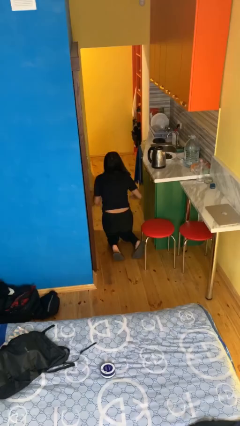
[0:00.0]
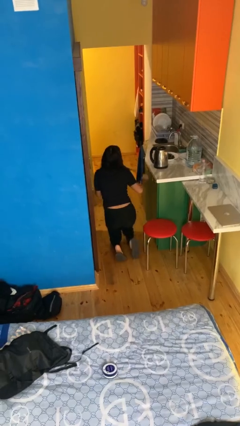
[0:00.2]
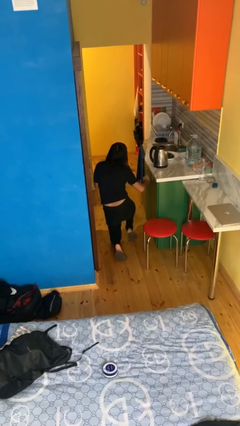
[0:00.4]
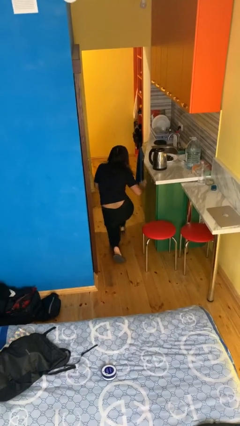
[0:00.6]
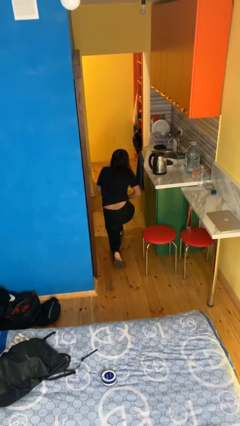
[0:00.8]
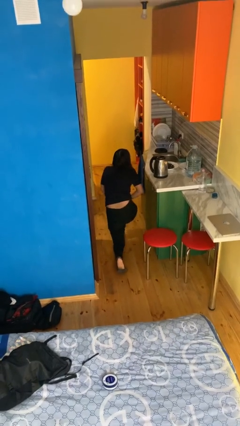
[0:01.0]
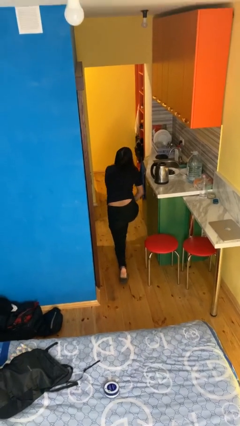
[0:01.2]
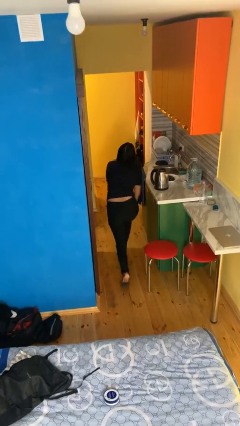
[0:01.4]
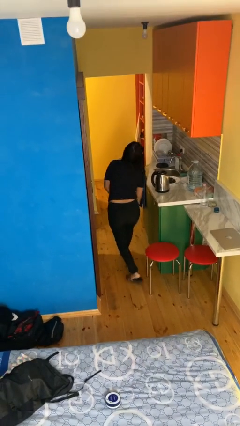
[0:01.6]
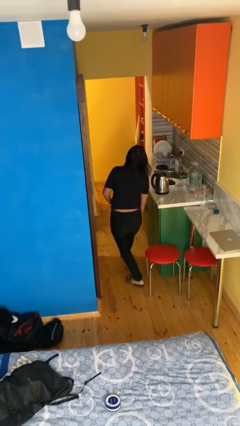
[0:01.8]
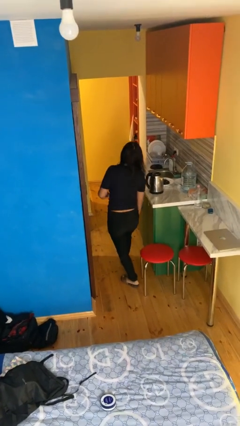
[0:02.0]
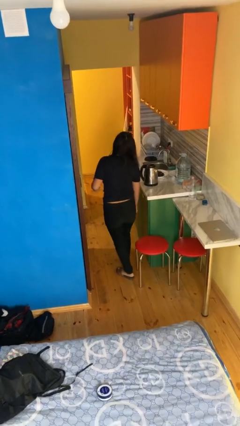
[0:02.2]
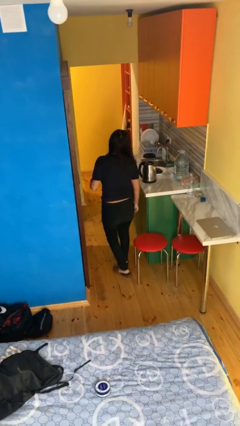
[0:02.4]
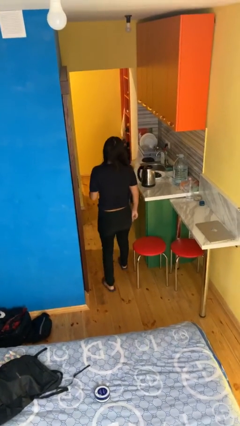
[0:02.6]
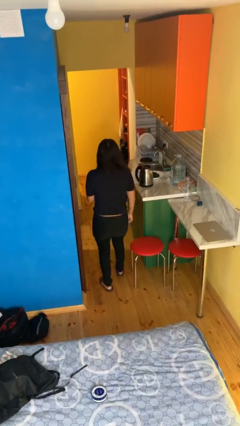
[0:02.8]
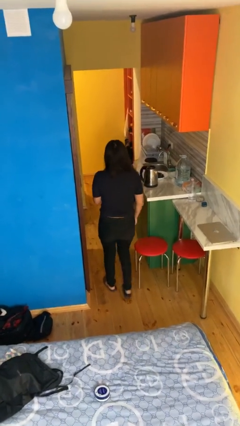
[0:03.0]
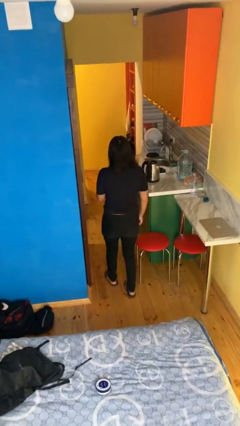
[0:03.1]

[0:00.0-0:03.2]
person stands up from floor

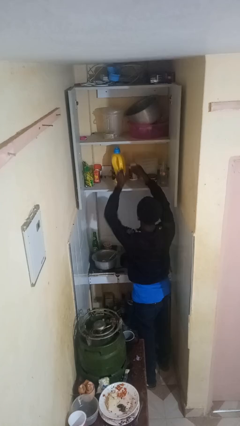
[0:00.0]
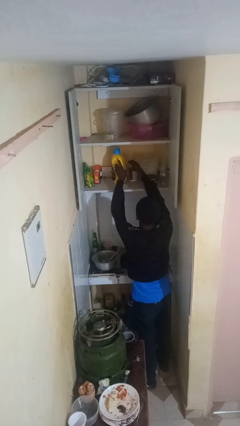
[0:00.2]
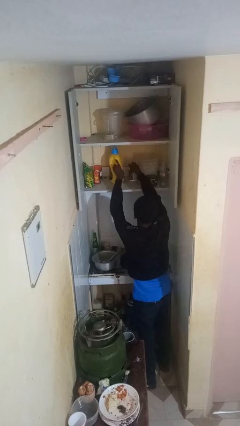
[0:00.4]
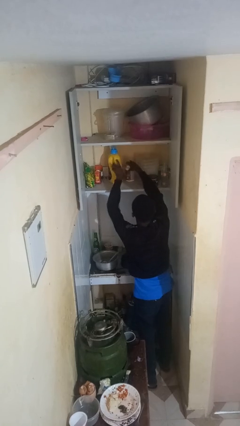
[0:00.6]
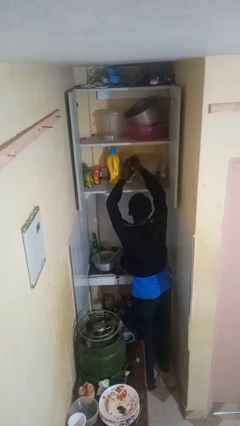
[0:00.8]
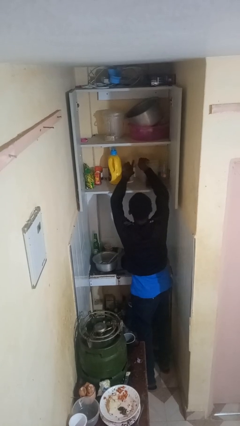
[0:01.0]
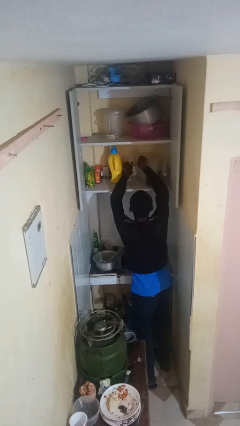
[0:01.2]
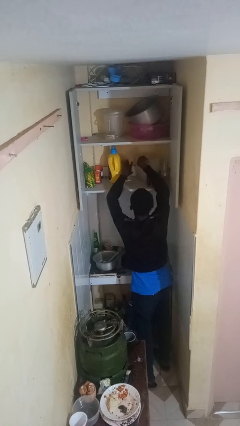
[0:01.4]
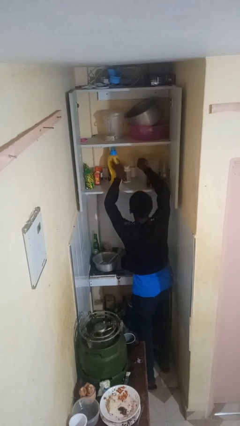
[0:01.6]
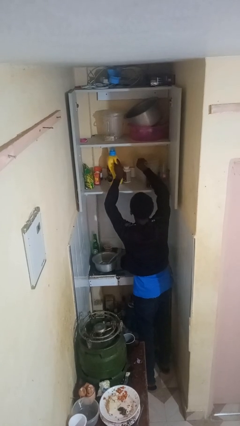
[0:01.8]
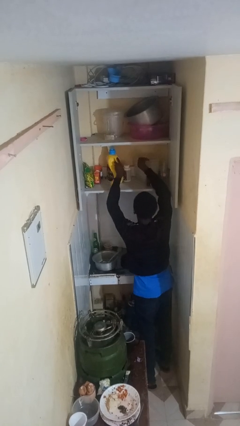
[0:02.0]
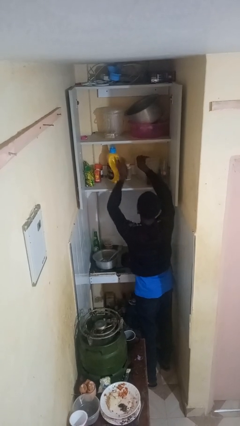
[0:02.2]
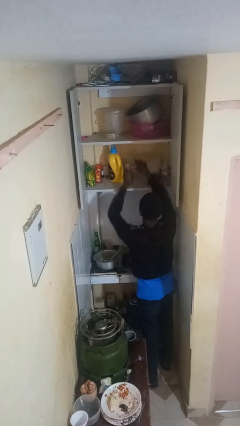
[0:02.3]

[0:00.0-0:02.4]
person searches in kitchen drawer

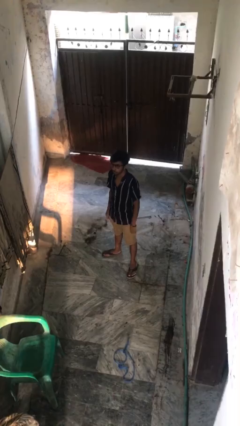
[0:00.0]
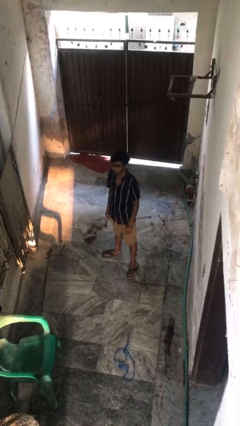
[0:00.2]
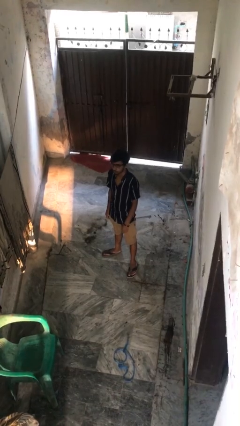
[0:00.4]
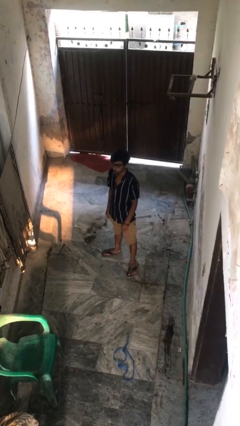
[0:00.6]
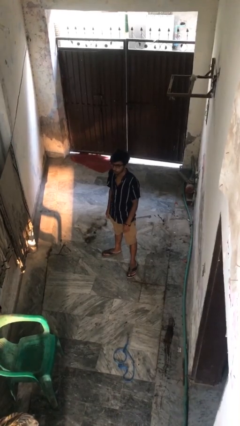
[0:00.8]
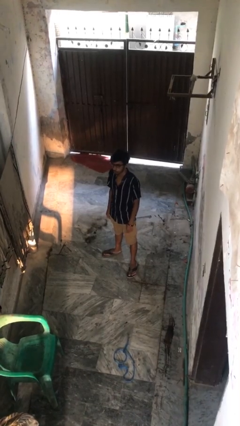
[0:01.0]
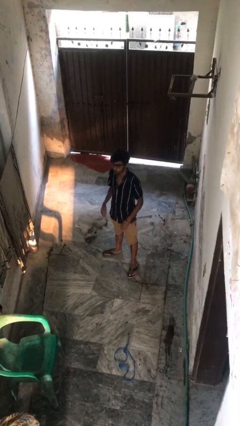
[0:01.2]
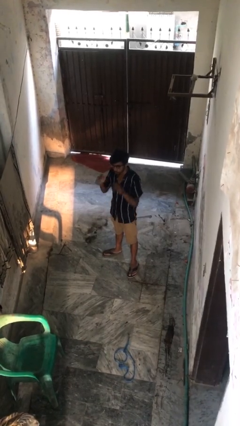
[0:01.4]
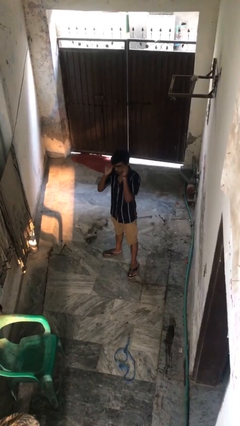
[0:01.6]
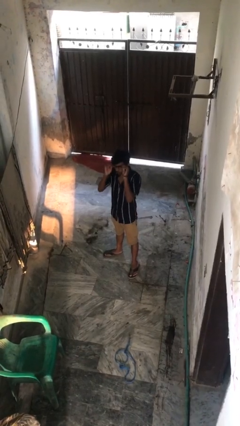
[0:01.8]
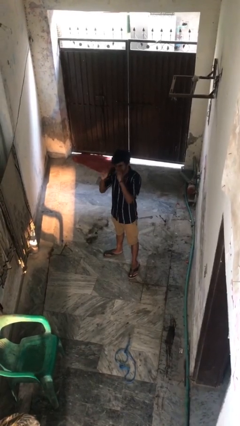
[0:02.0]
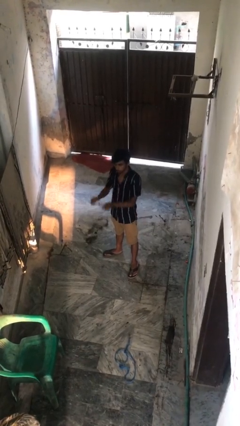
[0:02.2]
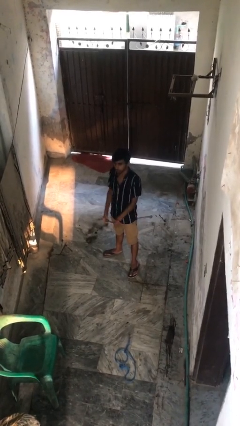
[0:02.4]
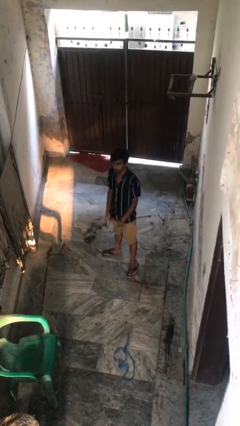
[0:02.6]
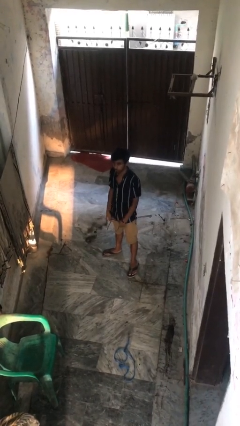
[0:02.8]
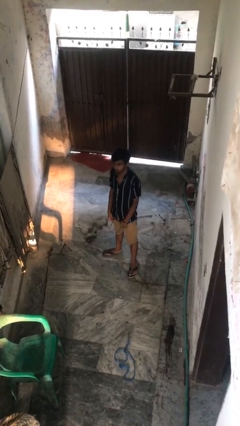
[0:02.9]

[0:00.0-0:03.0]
person takes off glasses

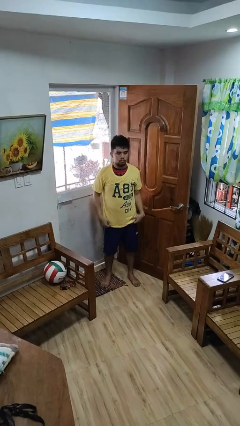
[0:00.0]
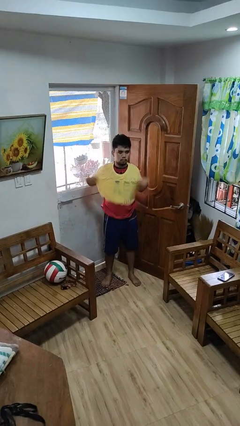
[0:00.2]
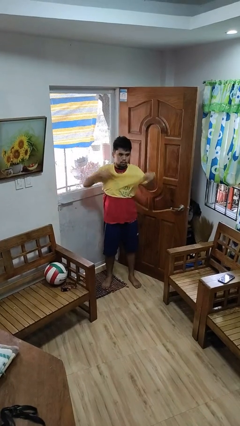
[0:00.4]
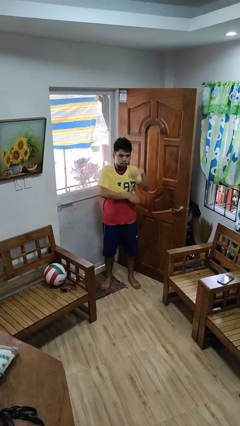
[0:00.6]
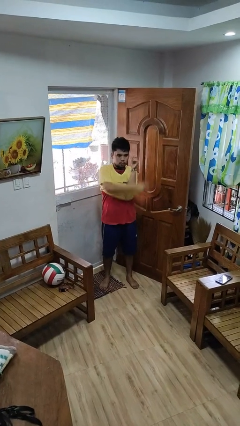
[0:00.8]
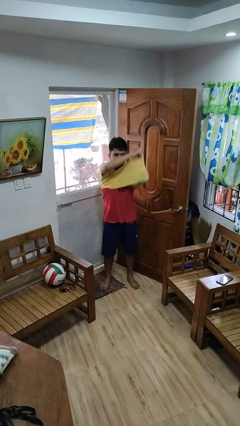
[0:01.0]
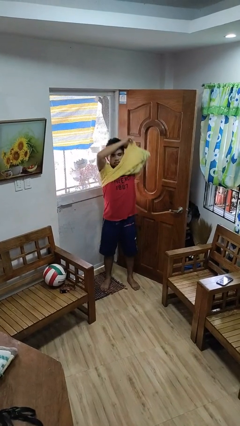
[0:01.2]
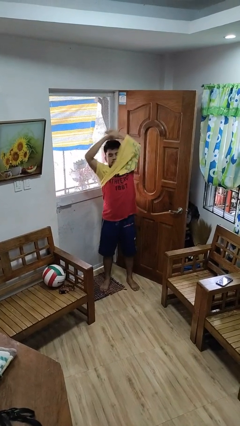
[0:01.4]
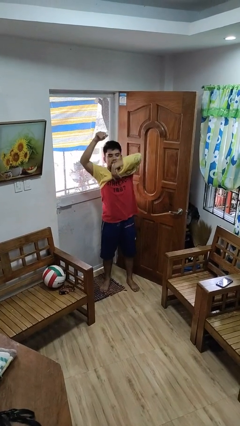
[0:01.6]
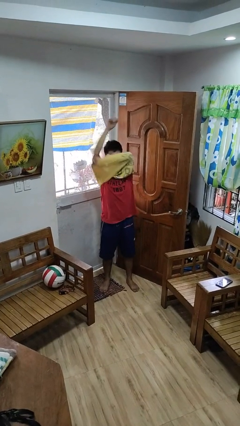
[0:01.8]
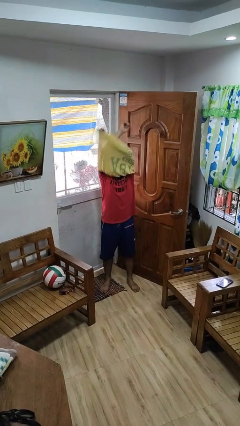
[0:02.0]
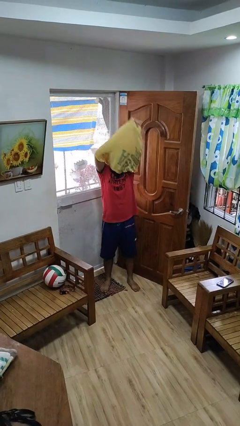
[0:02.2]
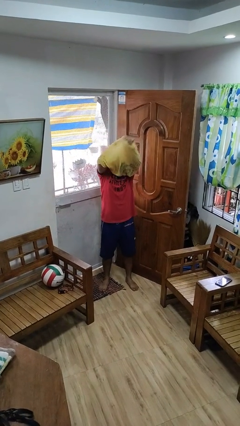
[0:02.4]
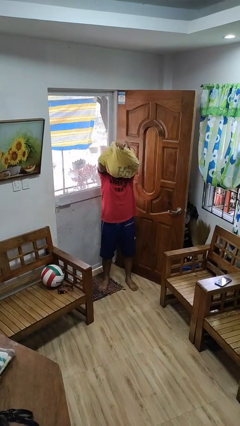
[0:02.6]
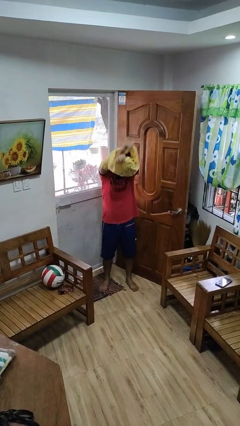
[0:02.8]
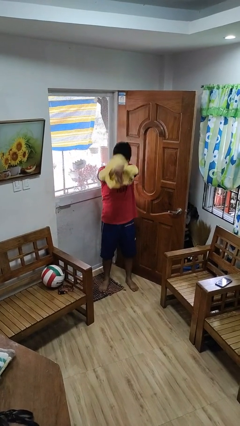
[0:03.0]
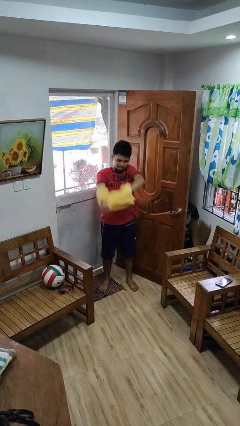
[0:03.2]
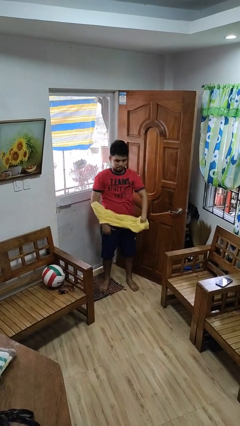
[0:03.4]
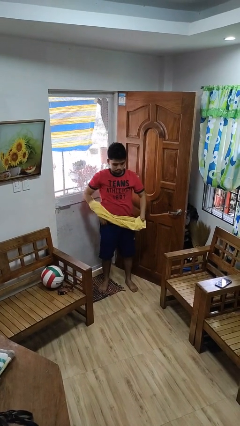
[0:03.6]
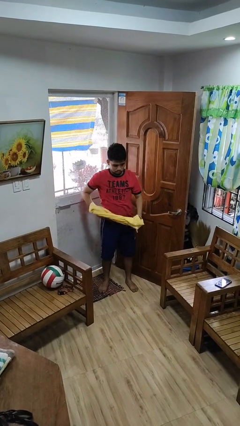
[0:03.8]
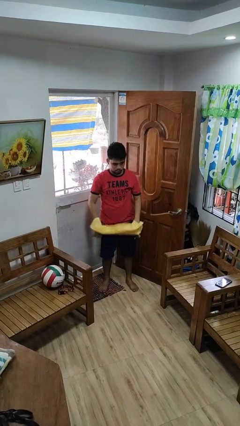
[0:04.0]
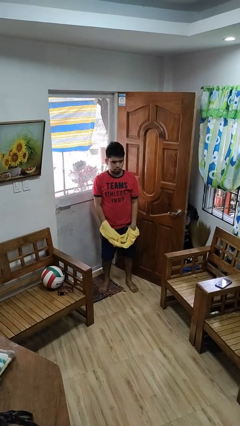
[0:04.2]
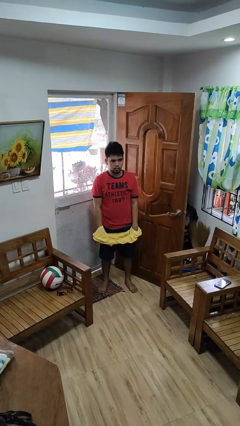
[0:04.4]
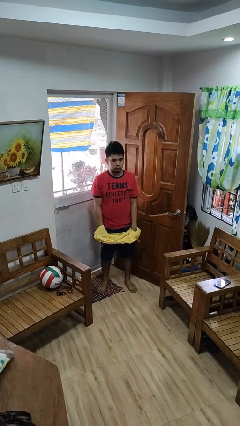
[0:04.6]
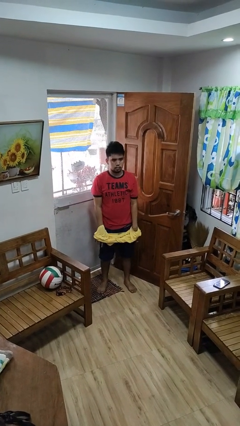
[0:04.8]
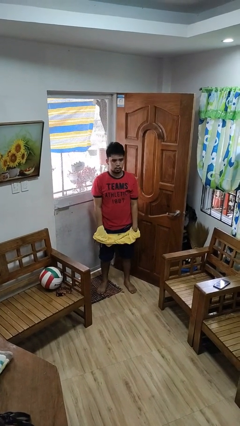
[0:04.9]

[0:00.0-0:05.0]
person takes off shirt

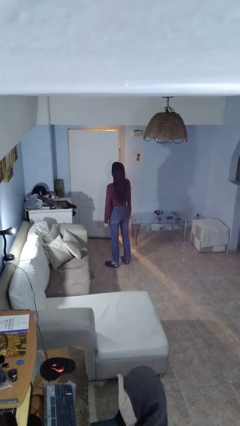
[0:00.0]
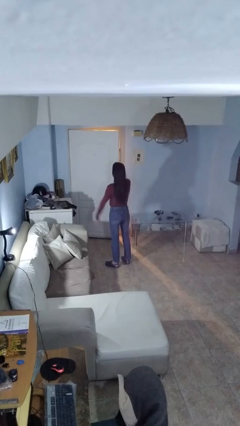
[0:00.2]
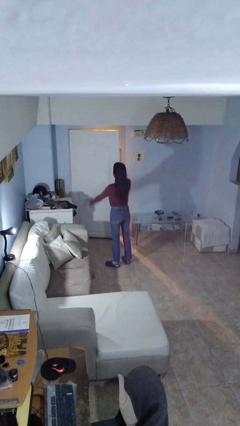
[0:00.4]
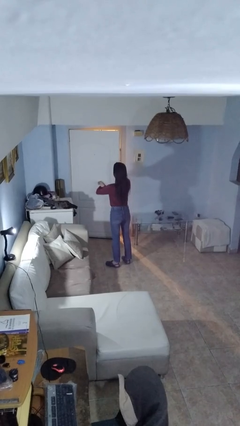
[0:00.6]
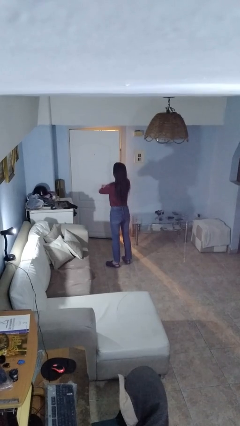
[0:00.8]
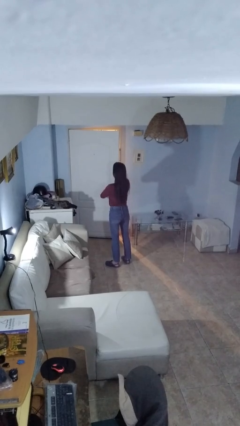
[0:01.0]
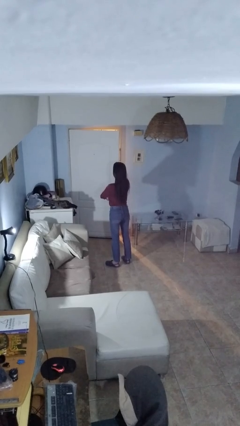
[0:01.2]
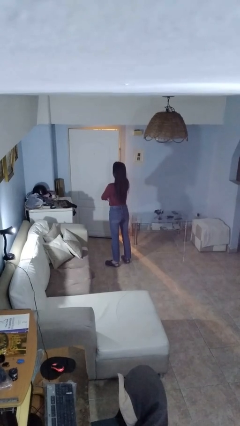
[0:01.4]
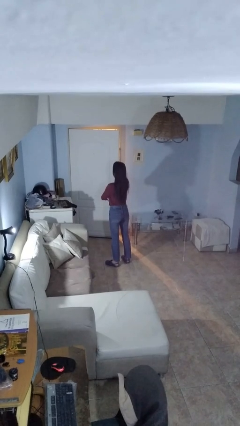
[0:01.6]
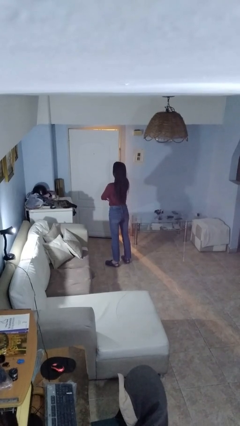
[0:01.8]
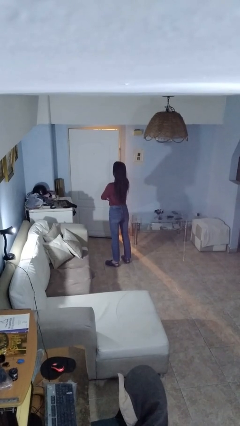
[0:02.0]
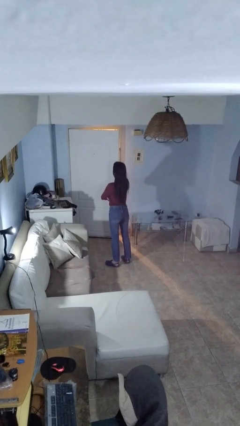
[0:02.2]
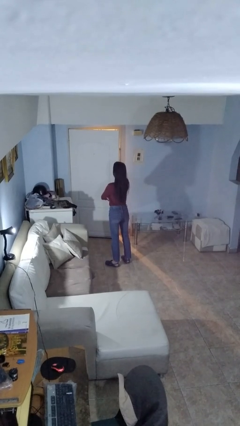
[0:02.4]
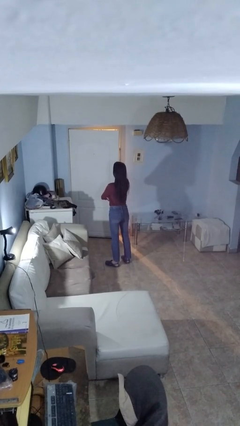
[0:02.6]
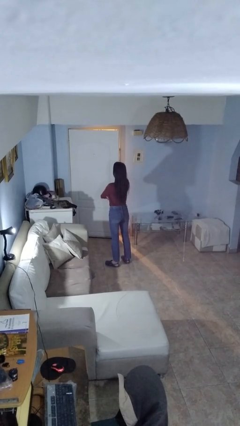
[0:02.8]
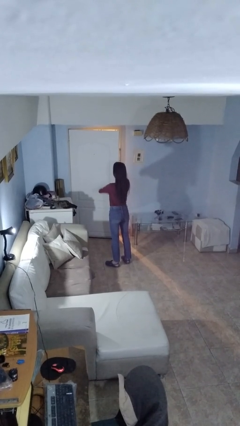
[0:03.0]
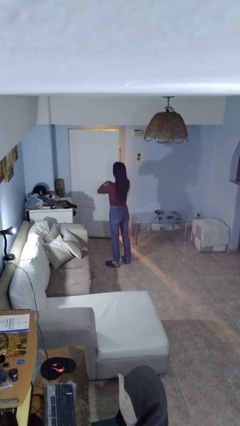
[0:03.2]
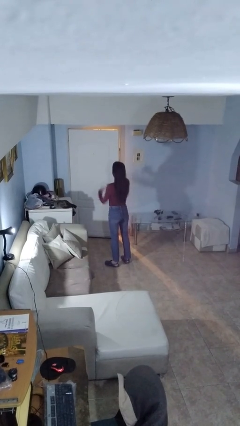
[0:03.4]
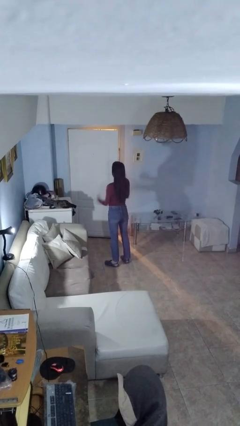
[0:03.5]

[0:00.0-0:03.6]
person crosses arms

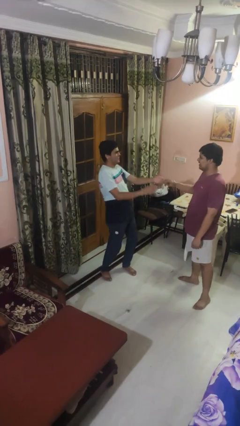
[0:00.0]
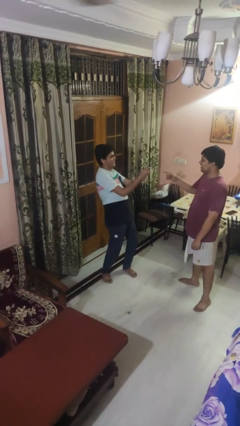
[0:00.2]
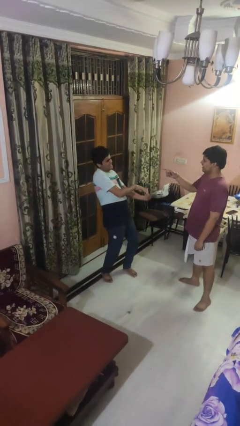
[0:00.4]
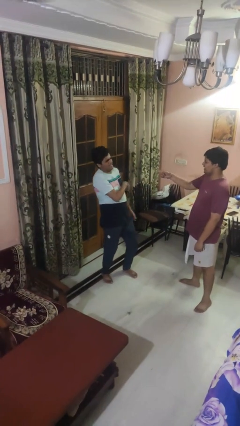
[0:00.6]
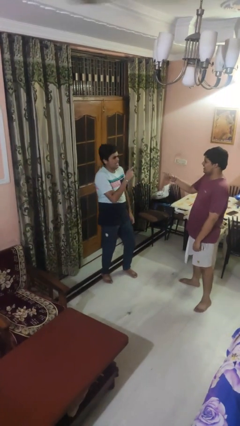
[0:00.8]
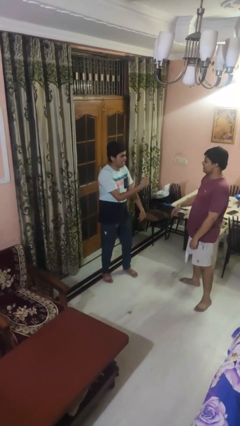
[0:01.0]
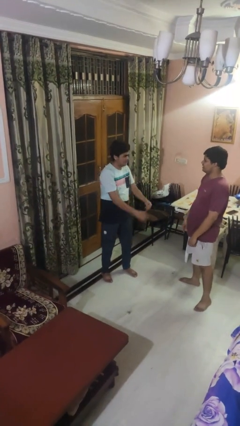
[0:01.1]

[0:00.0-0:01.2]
person laughs with person
